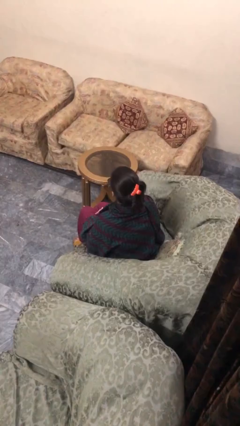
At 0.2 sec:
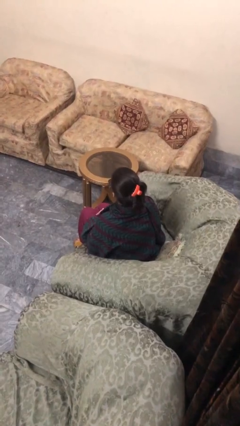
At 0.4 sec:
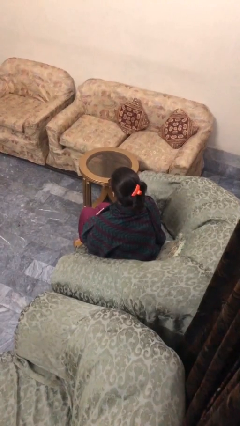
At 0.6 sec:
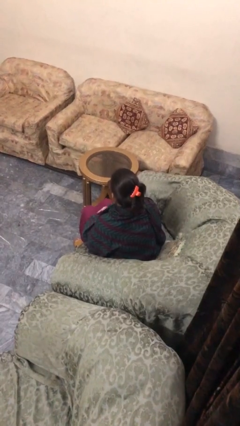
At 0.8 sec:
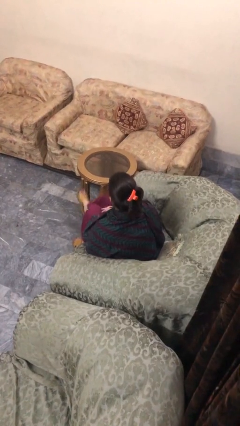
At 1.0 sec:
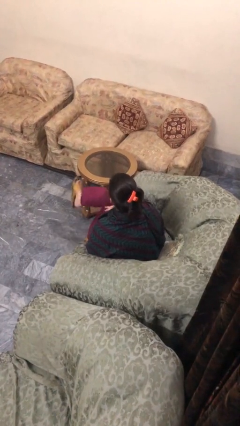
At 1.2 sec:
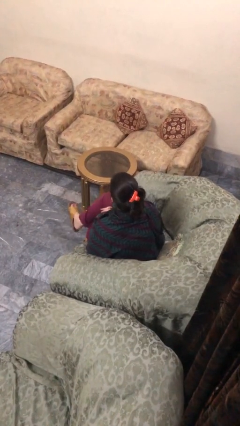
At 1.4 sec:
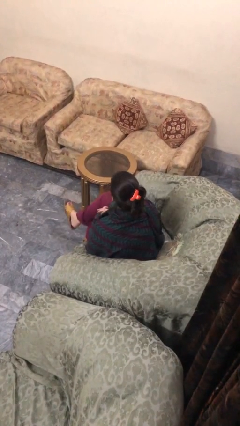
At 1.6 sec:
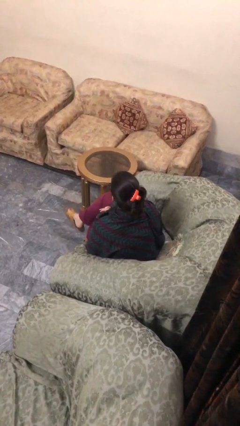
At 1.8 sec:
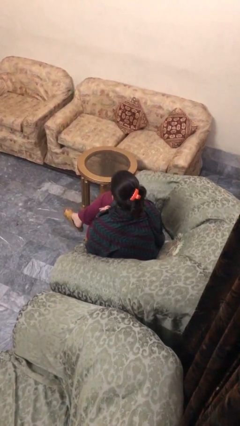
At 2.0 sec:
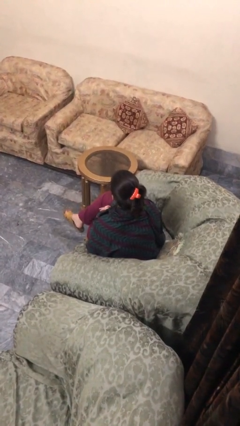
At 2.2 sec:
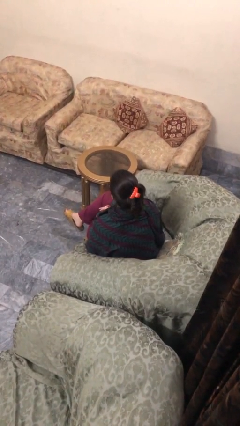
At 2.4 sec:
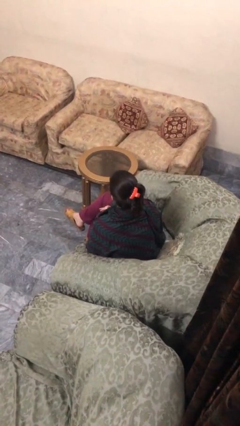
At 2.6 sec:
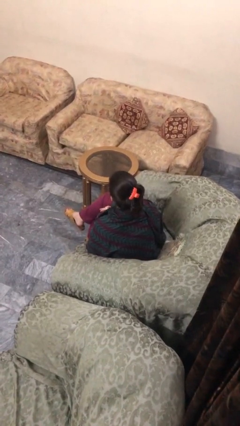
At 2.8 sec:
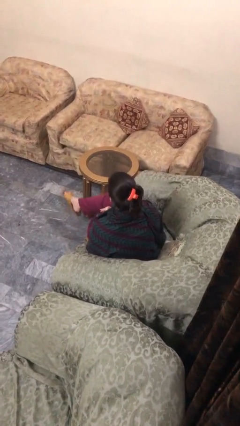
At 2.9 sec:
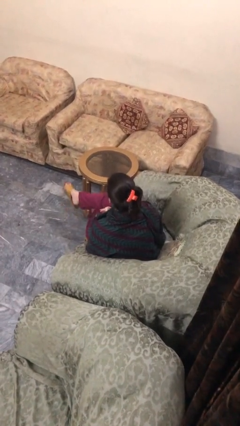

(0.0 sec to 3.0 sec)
person crosses legs

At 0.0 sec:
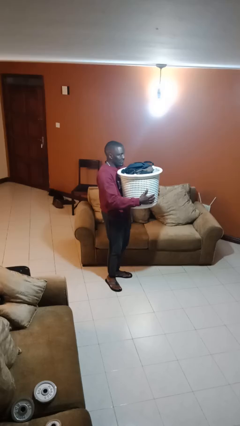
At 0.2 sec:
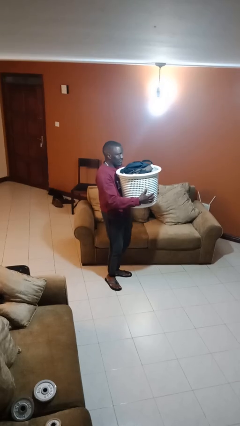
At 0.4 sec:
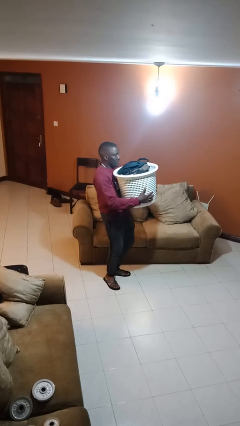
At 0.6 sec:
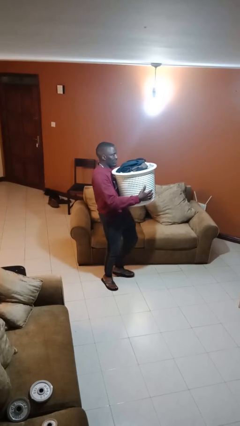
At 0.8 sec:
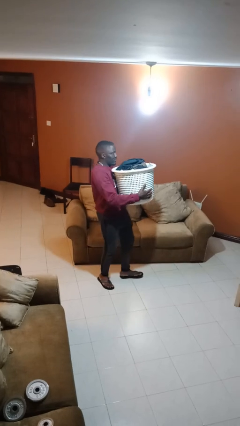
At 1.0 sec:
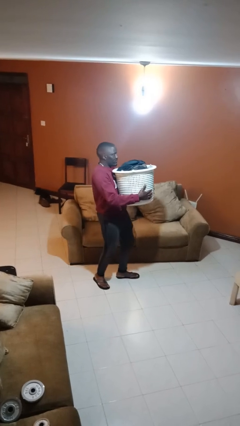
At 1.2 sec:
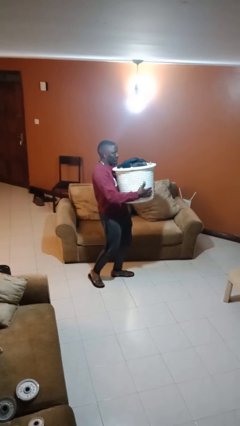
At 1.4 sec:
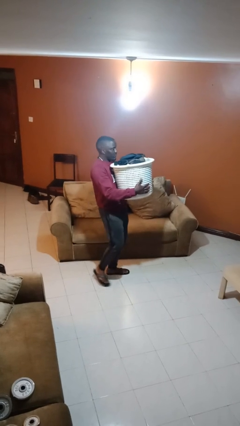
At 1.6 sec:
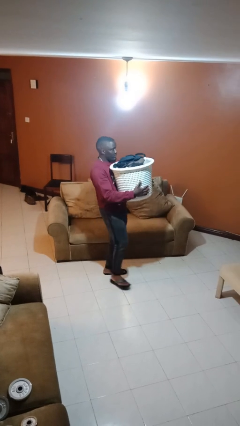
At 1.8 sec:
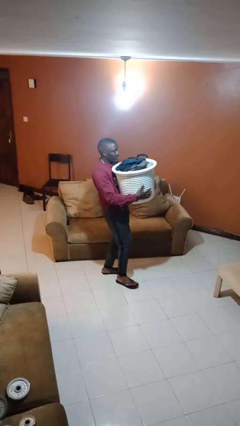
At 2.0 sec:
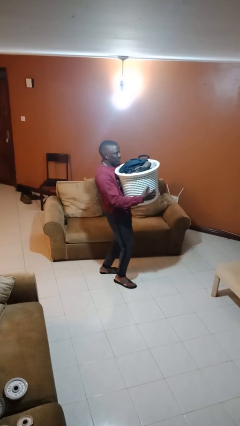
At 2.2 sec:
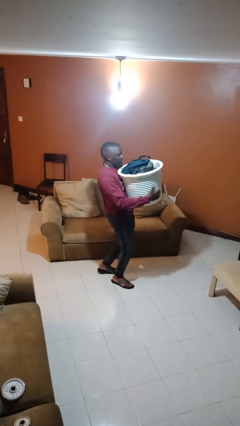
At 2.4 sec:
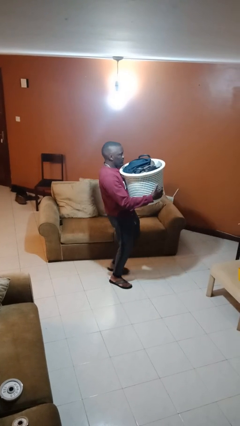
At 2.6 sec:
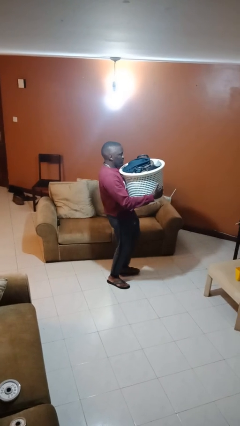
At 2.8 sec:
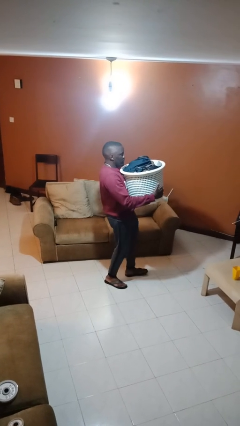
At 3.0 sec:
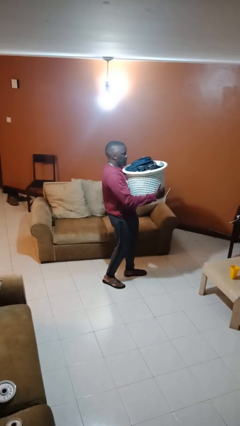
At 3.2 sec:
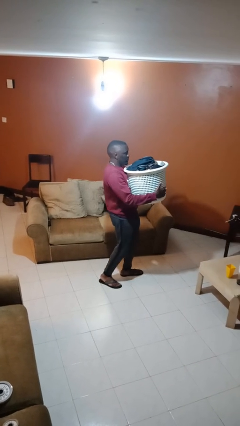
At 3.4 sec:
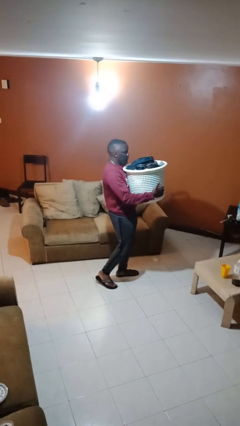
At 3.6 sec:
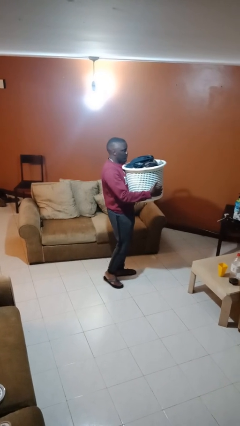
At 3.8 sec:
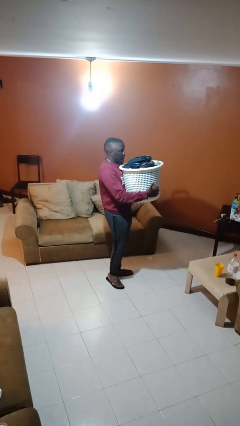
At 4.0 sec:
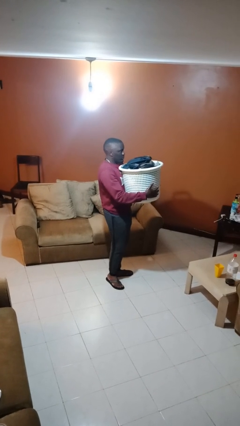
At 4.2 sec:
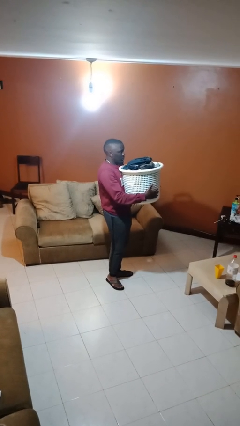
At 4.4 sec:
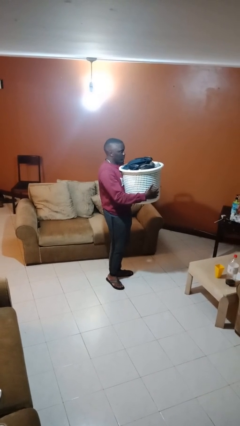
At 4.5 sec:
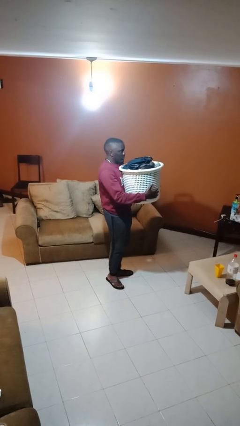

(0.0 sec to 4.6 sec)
person carries laundry basket

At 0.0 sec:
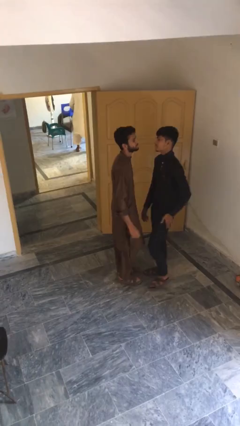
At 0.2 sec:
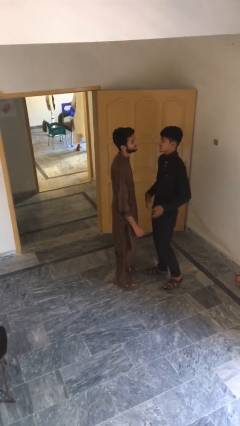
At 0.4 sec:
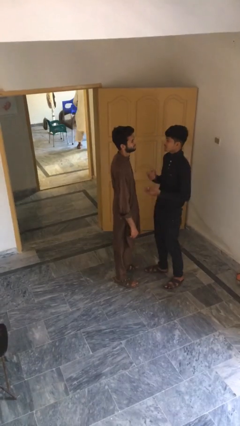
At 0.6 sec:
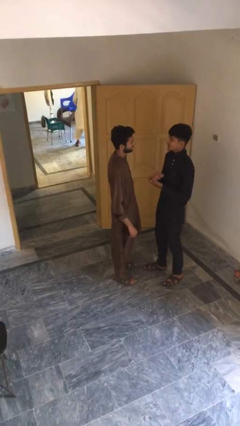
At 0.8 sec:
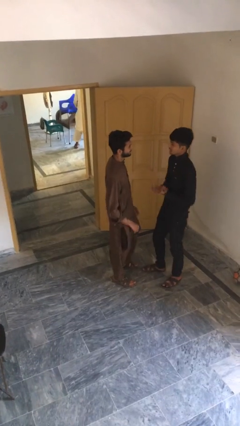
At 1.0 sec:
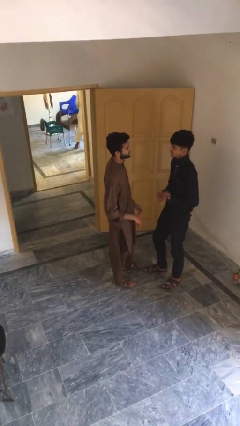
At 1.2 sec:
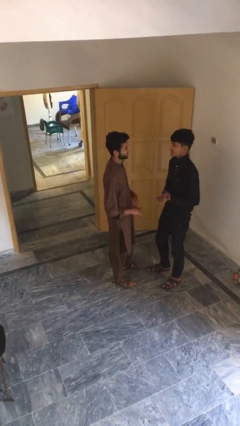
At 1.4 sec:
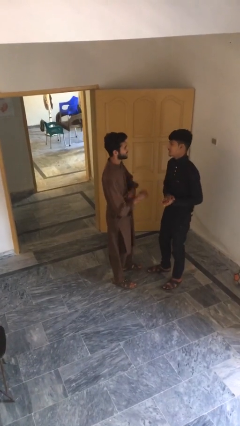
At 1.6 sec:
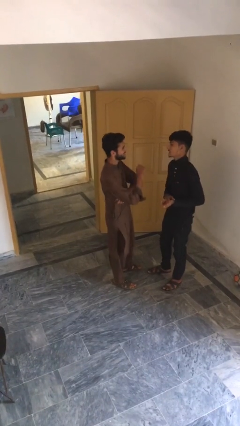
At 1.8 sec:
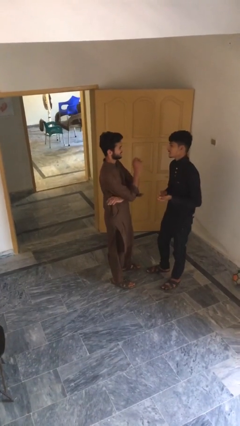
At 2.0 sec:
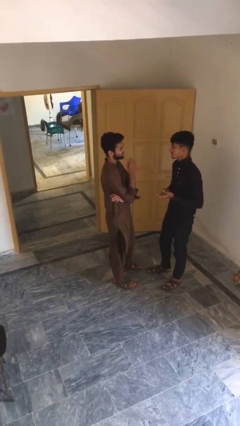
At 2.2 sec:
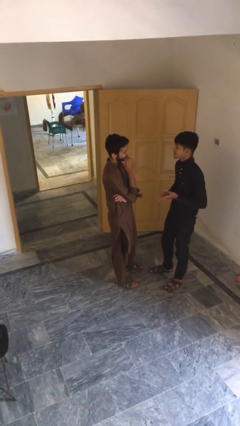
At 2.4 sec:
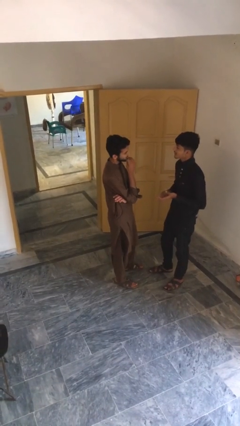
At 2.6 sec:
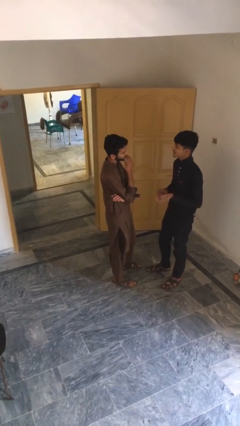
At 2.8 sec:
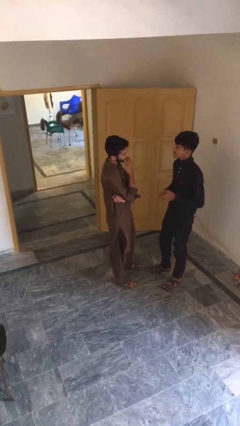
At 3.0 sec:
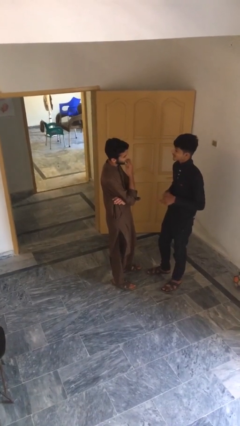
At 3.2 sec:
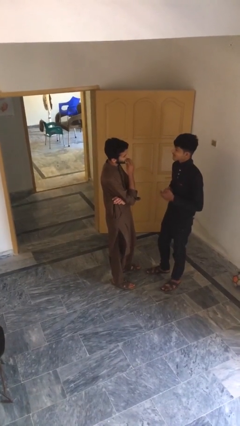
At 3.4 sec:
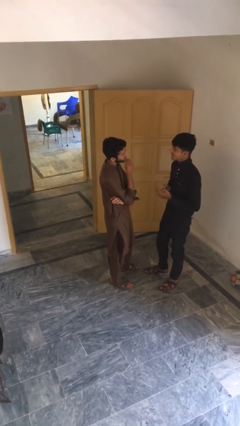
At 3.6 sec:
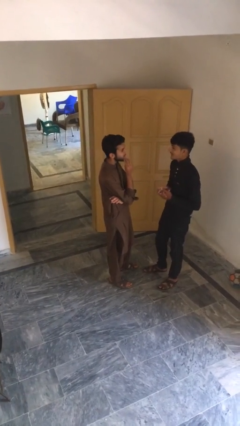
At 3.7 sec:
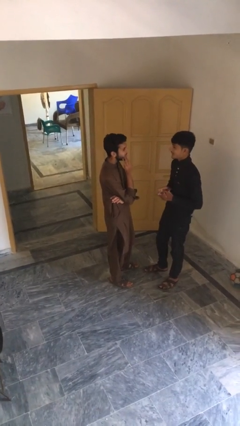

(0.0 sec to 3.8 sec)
person talks to person

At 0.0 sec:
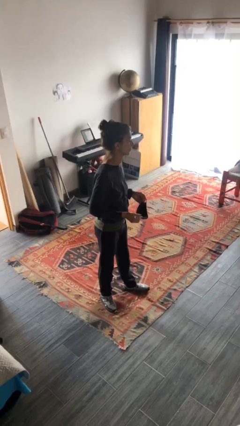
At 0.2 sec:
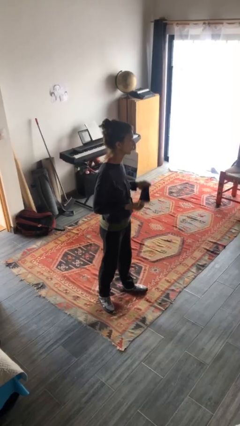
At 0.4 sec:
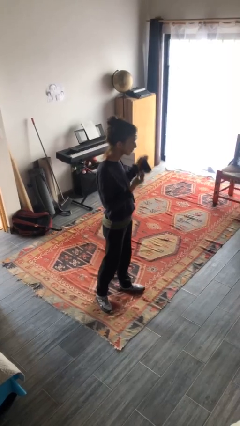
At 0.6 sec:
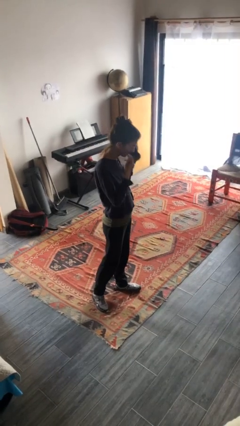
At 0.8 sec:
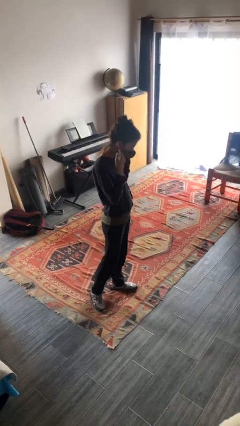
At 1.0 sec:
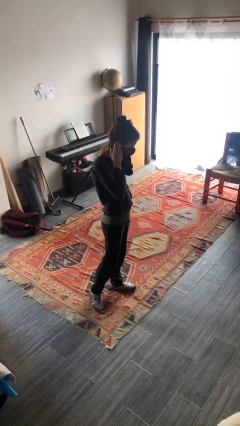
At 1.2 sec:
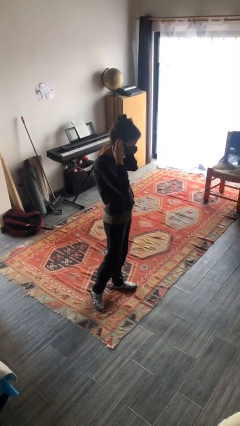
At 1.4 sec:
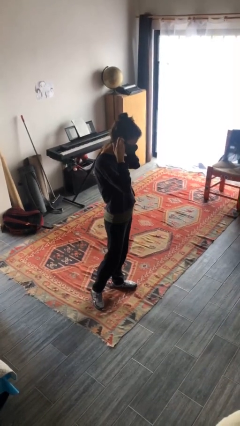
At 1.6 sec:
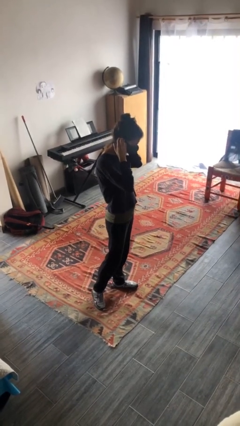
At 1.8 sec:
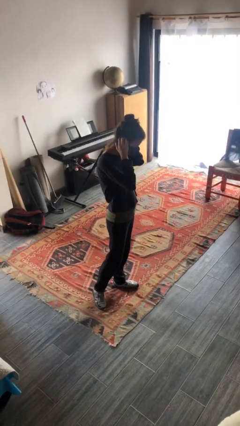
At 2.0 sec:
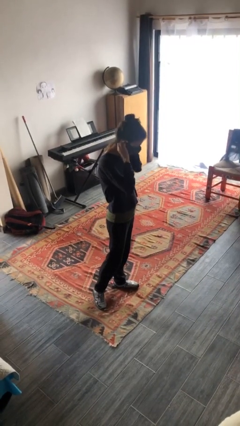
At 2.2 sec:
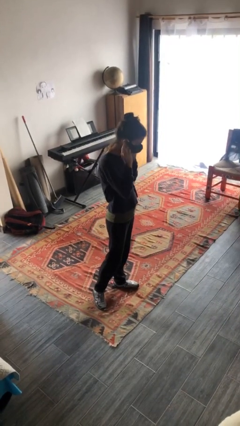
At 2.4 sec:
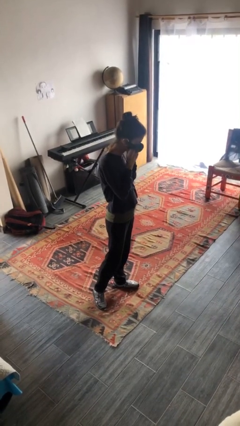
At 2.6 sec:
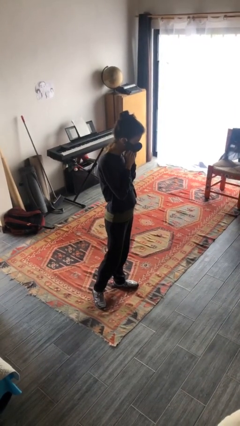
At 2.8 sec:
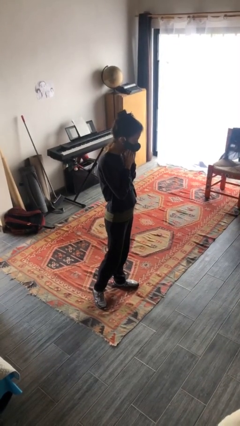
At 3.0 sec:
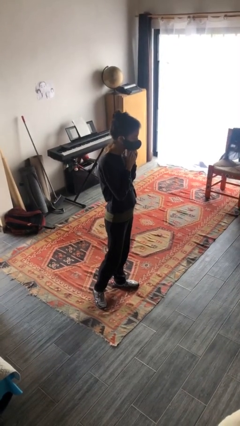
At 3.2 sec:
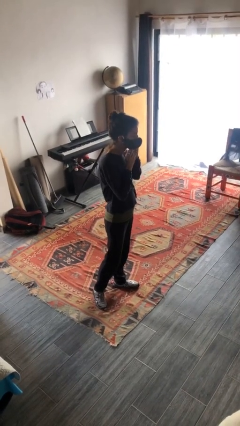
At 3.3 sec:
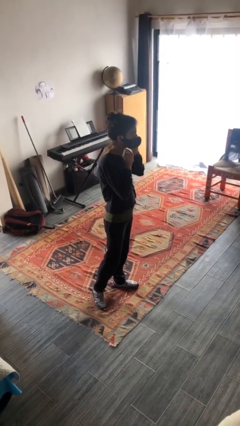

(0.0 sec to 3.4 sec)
person puts on facemask

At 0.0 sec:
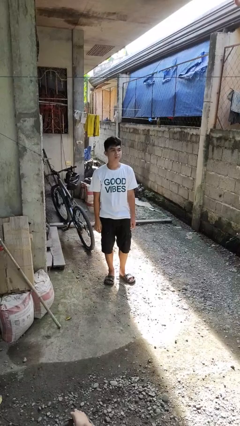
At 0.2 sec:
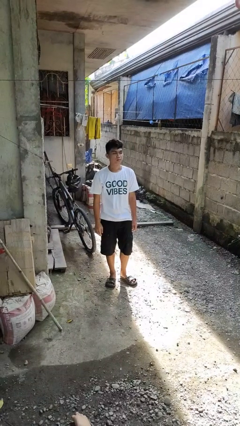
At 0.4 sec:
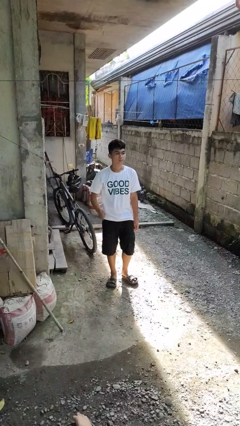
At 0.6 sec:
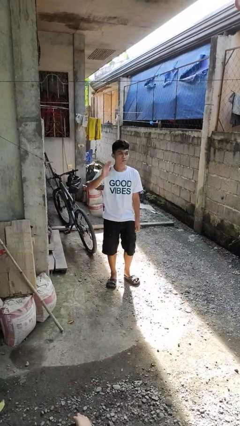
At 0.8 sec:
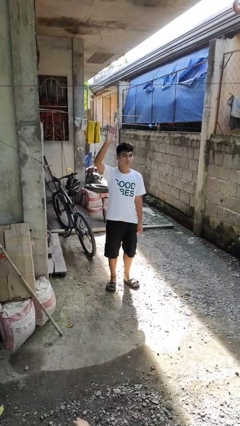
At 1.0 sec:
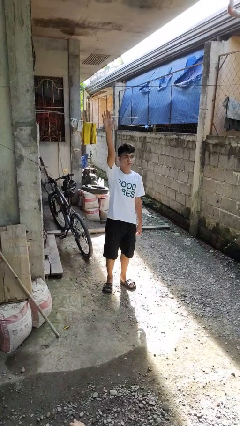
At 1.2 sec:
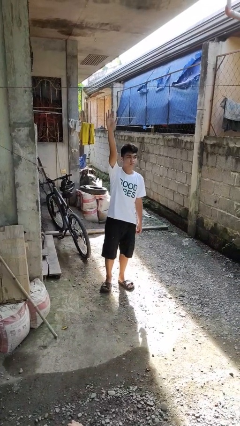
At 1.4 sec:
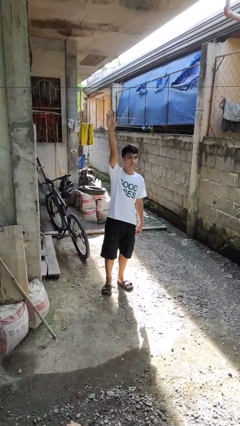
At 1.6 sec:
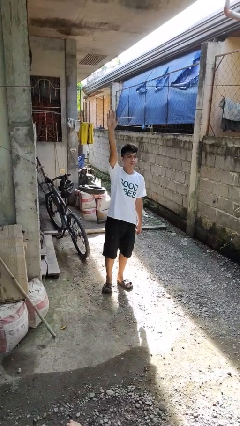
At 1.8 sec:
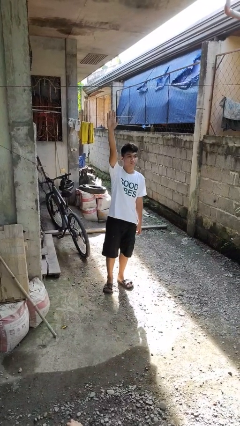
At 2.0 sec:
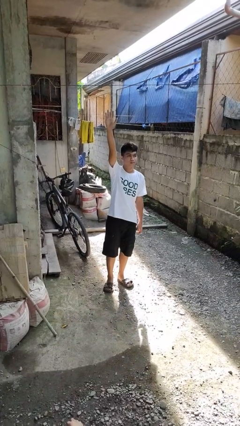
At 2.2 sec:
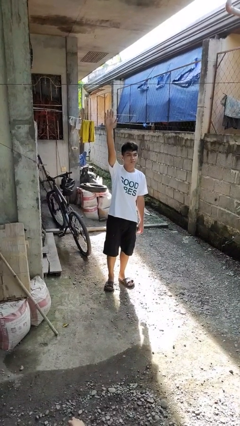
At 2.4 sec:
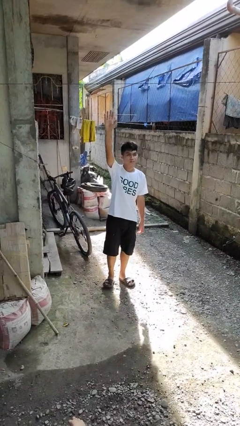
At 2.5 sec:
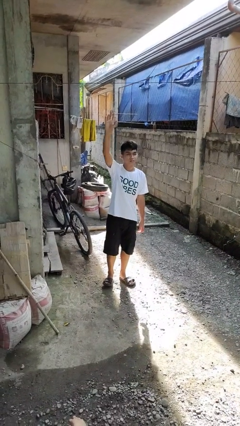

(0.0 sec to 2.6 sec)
person gestures raise hand
